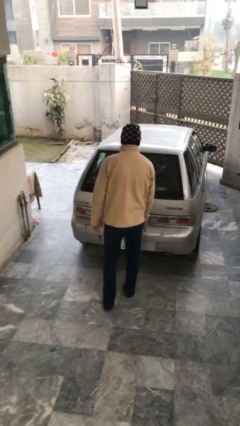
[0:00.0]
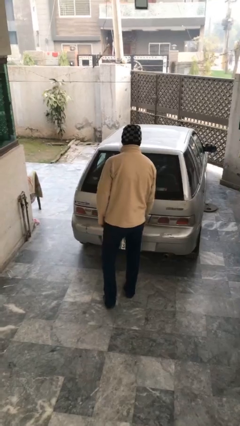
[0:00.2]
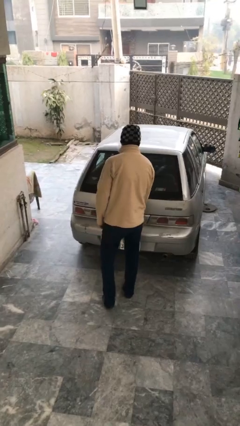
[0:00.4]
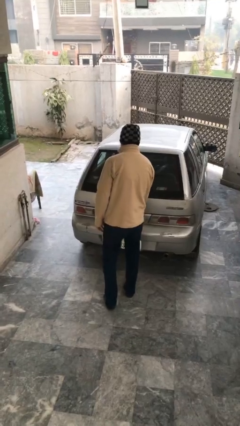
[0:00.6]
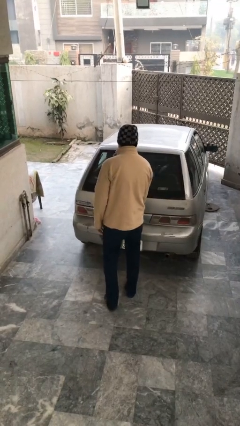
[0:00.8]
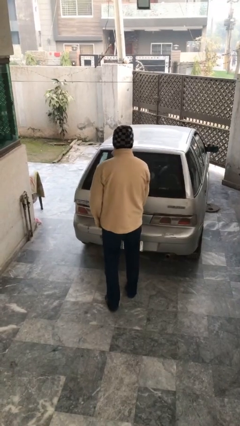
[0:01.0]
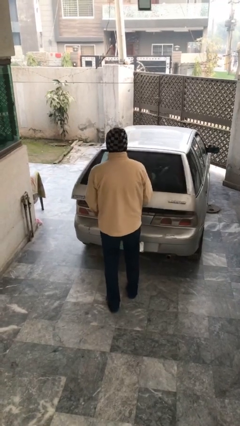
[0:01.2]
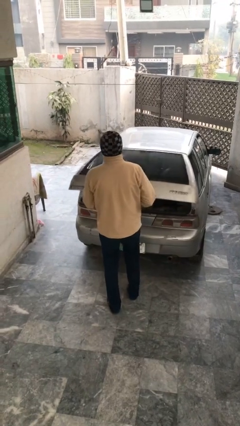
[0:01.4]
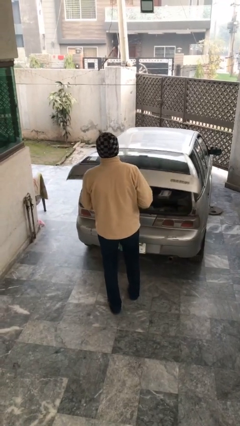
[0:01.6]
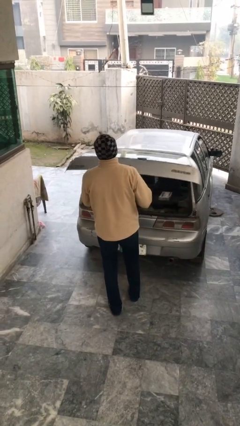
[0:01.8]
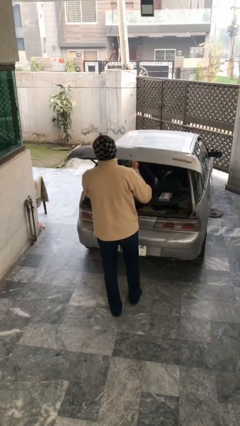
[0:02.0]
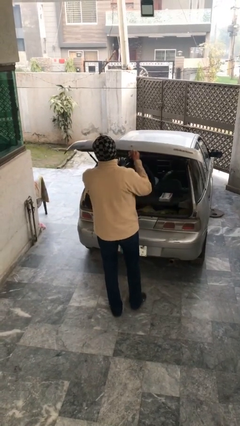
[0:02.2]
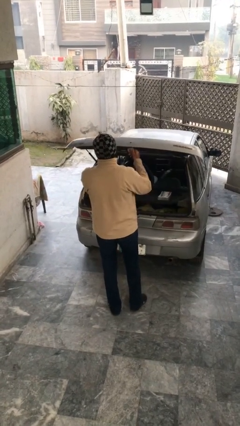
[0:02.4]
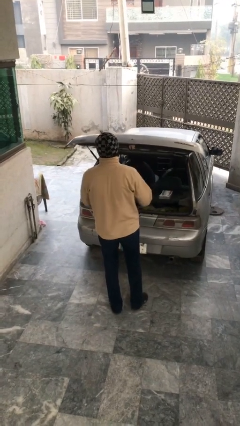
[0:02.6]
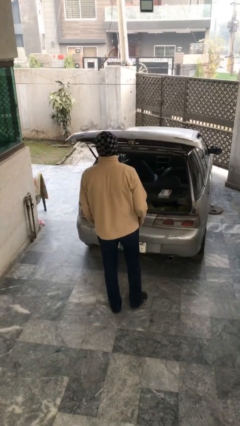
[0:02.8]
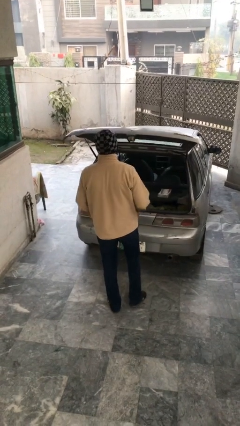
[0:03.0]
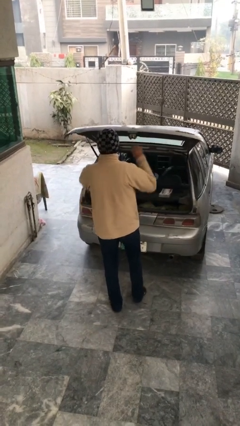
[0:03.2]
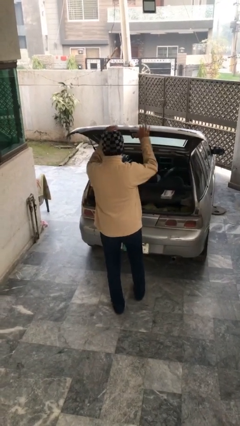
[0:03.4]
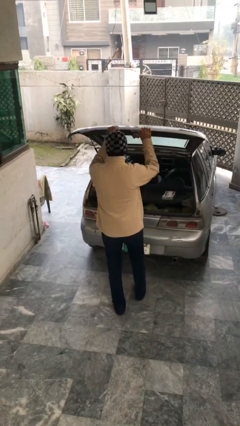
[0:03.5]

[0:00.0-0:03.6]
person opens car trunk

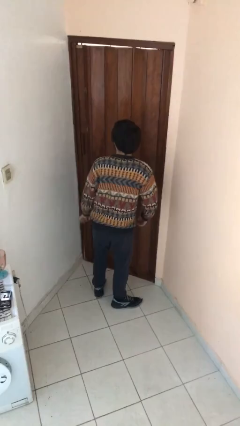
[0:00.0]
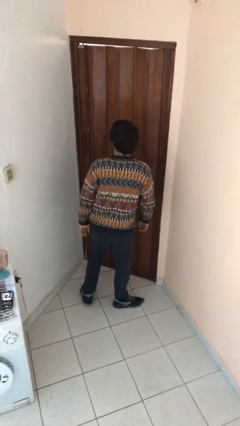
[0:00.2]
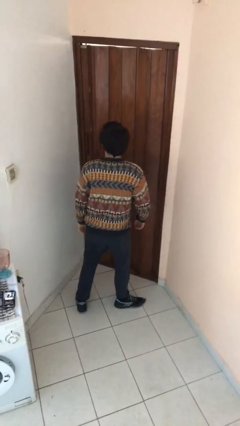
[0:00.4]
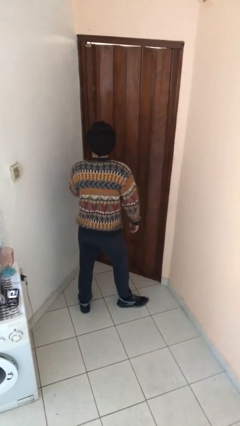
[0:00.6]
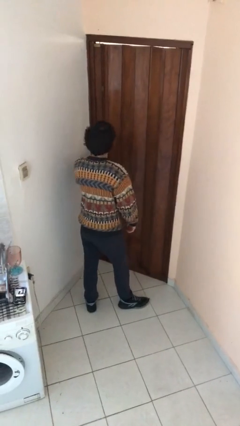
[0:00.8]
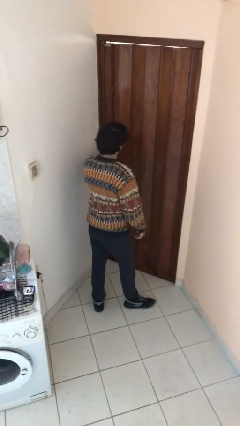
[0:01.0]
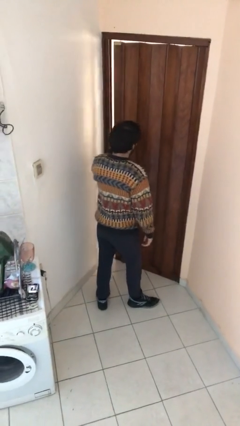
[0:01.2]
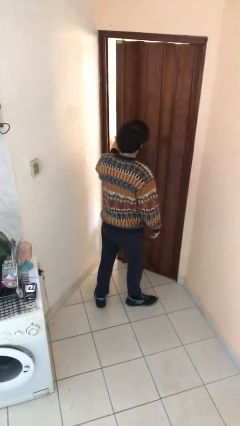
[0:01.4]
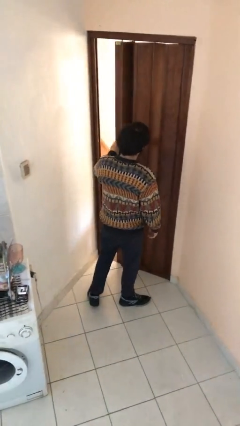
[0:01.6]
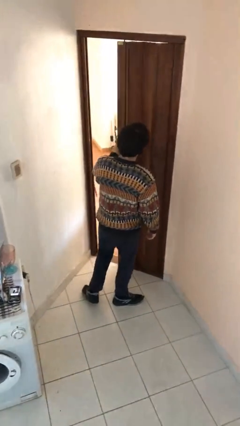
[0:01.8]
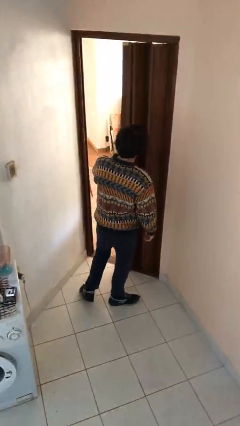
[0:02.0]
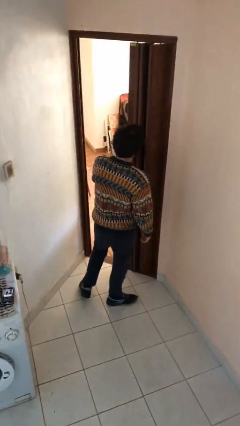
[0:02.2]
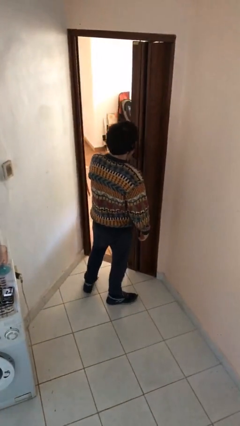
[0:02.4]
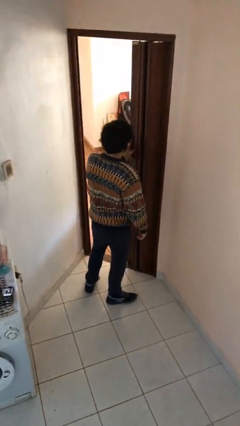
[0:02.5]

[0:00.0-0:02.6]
person opens sliding door

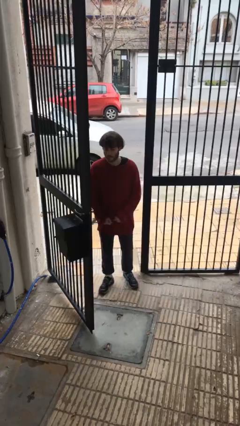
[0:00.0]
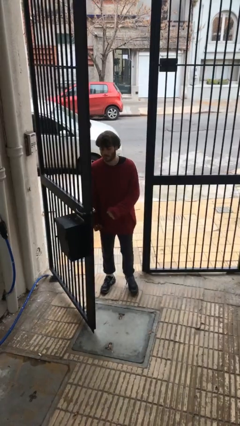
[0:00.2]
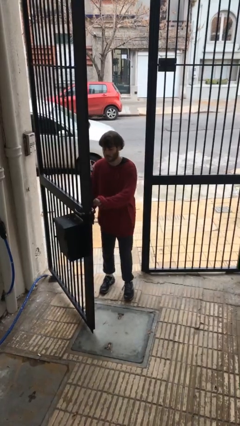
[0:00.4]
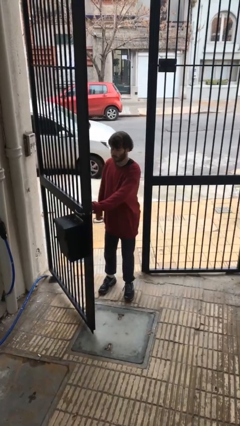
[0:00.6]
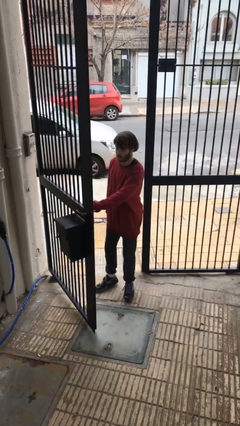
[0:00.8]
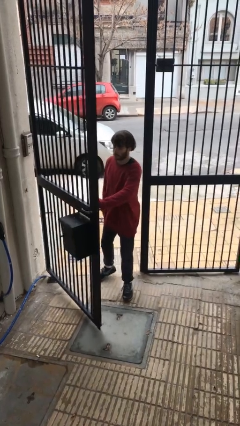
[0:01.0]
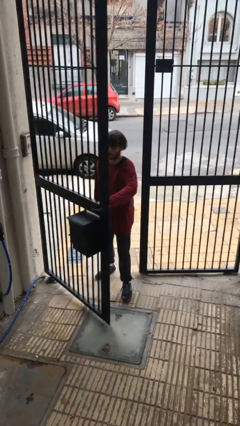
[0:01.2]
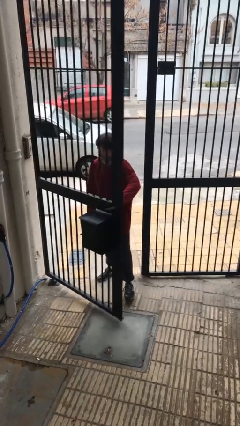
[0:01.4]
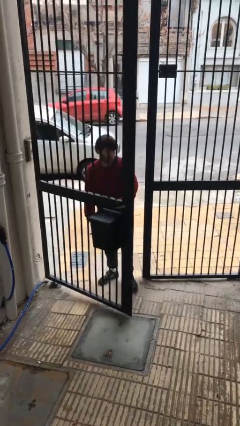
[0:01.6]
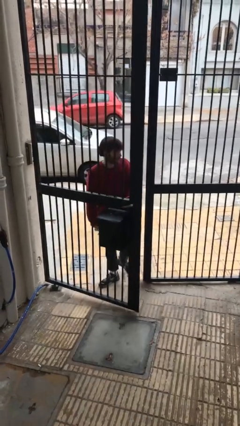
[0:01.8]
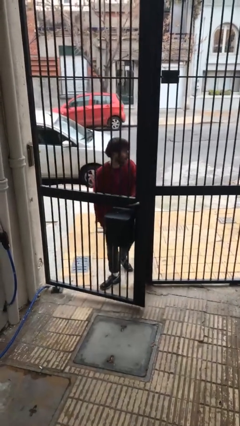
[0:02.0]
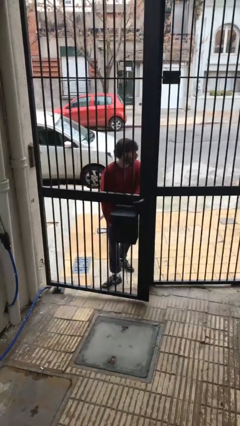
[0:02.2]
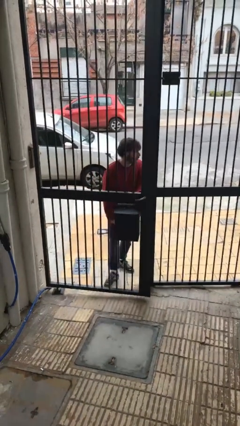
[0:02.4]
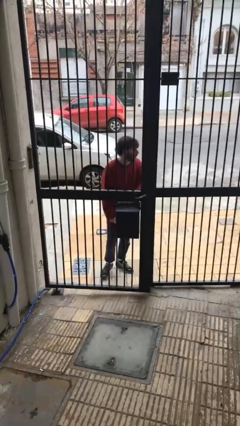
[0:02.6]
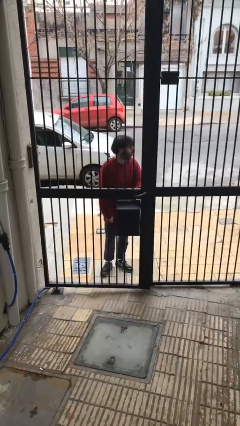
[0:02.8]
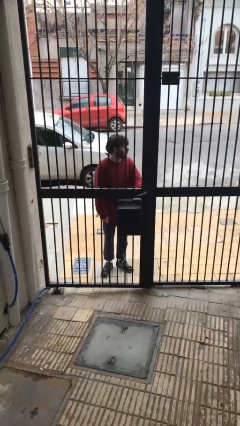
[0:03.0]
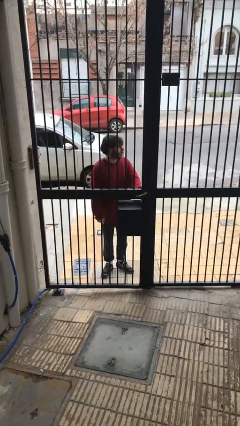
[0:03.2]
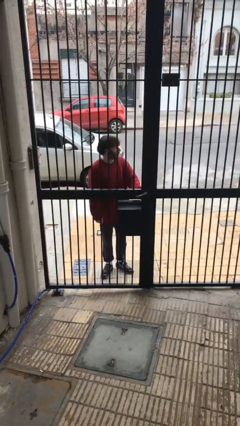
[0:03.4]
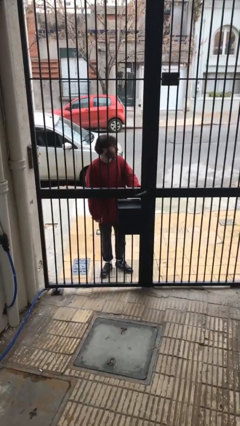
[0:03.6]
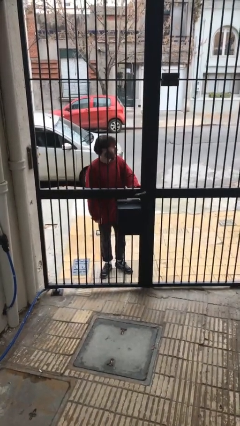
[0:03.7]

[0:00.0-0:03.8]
person closes gate

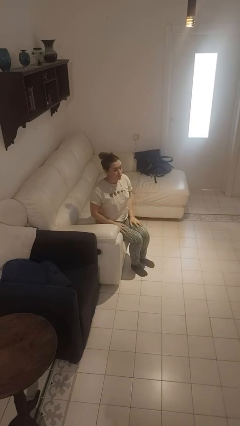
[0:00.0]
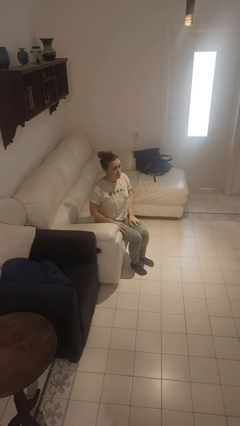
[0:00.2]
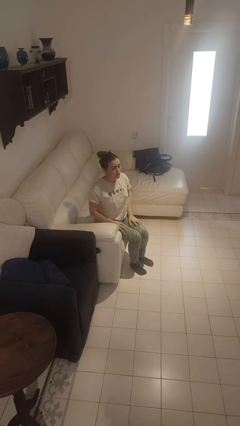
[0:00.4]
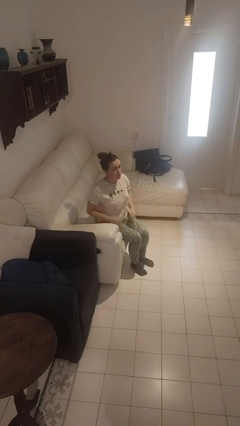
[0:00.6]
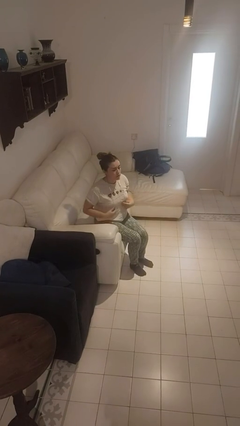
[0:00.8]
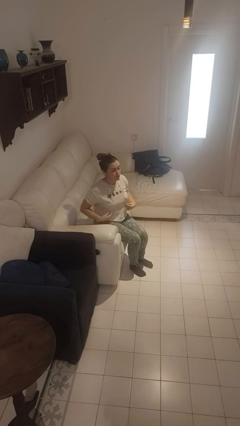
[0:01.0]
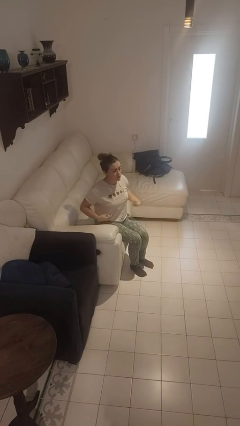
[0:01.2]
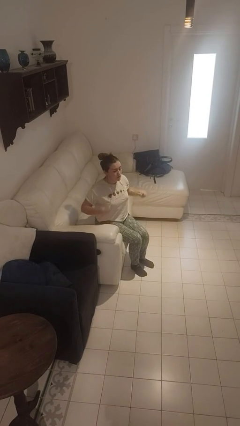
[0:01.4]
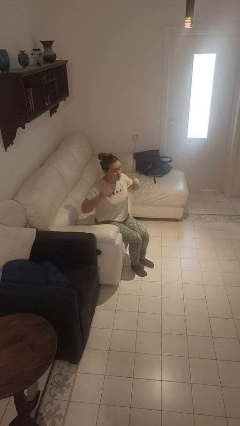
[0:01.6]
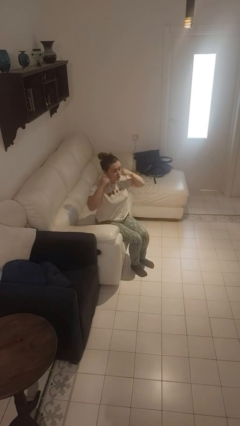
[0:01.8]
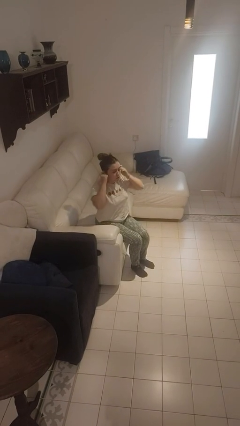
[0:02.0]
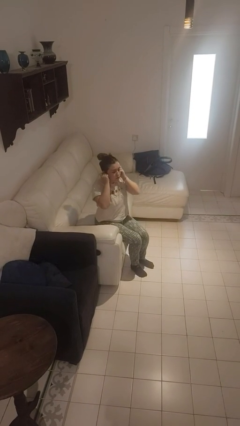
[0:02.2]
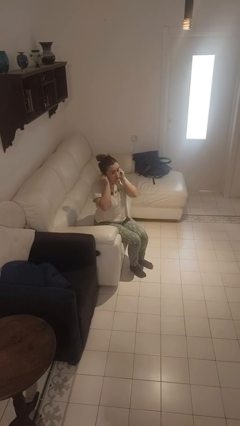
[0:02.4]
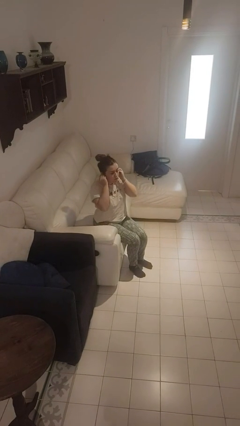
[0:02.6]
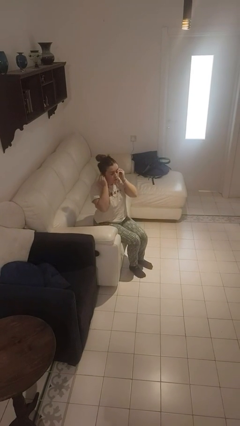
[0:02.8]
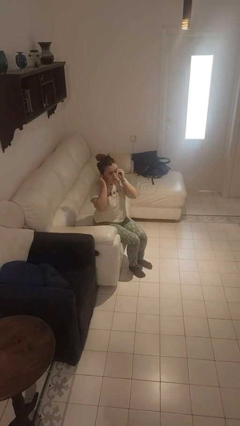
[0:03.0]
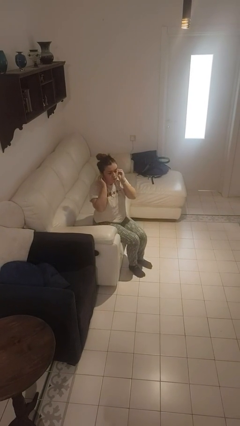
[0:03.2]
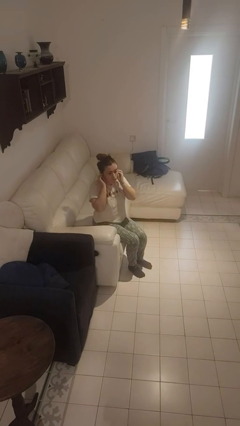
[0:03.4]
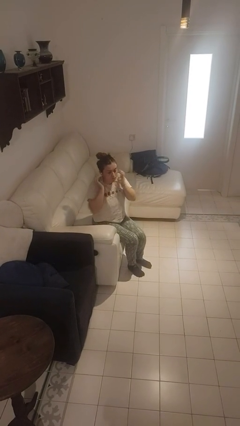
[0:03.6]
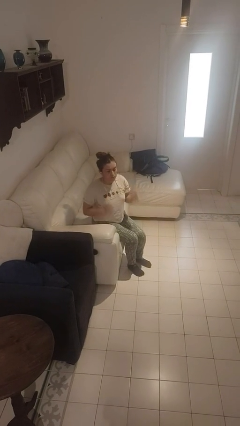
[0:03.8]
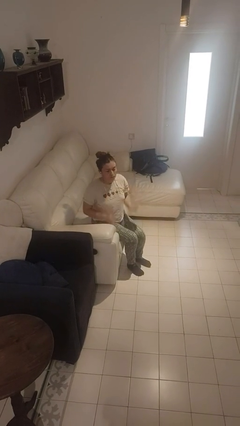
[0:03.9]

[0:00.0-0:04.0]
person puts on headphones

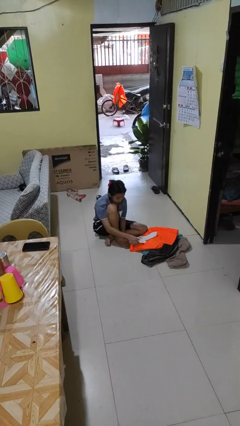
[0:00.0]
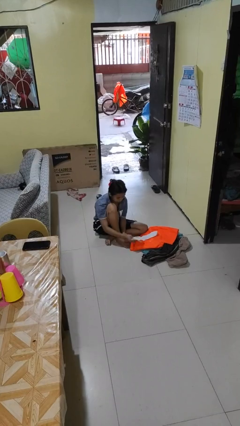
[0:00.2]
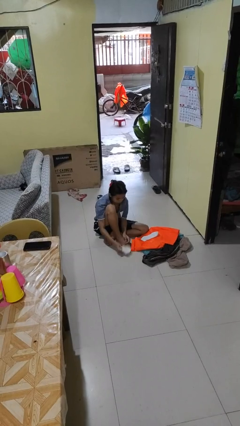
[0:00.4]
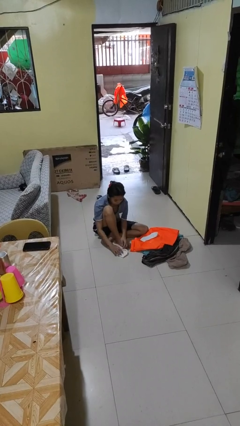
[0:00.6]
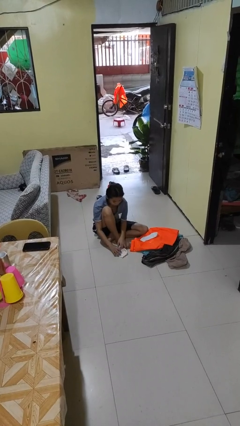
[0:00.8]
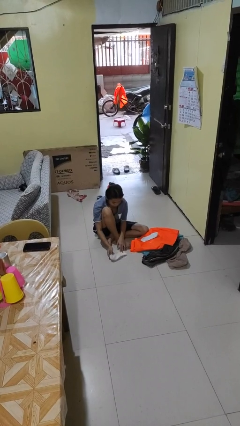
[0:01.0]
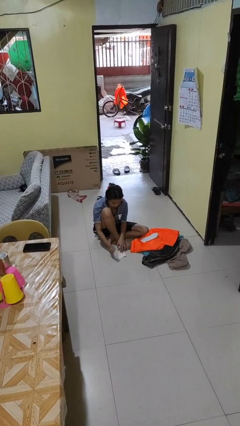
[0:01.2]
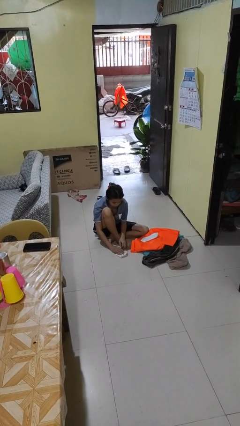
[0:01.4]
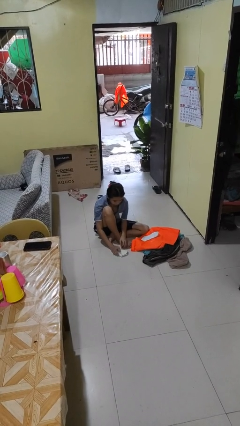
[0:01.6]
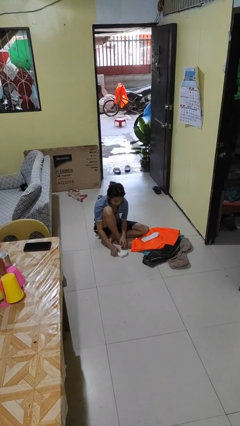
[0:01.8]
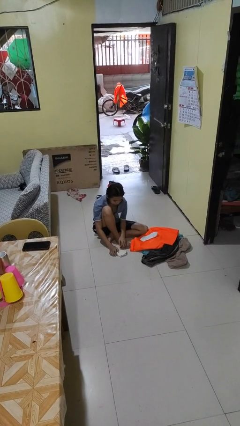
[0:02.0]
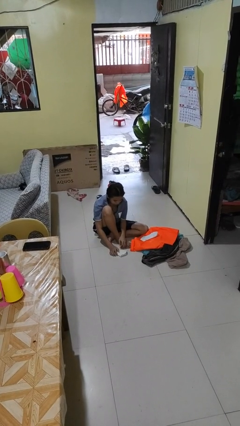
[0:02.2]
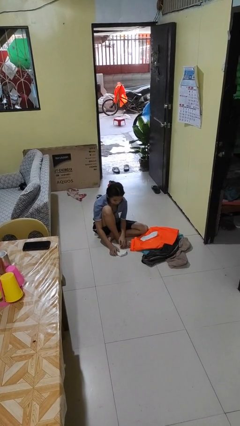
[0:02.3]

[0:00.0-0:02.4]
person folds socks

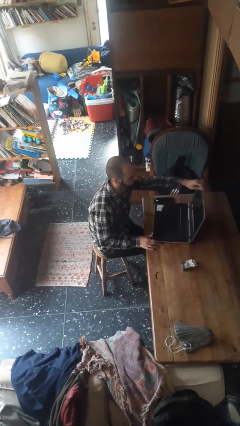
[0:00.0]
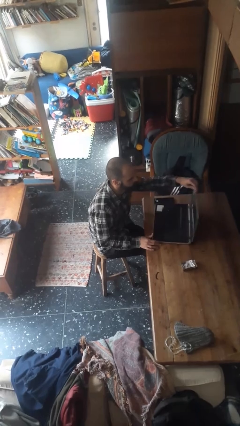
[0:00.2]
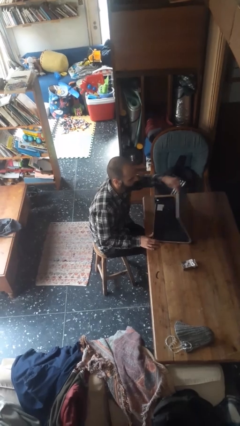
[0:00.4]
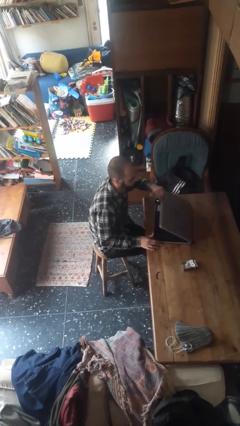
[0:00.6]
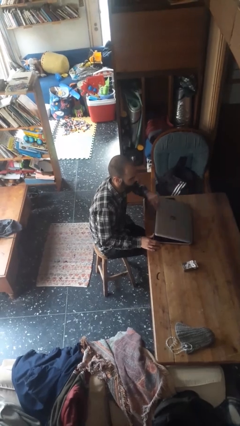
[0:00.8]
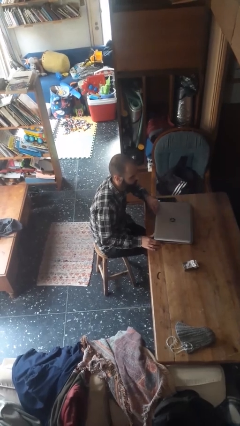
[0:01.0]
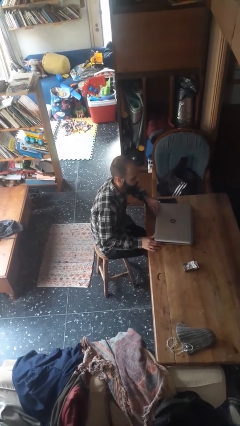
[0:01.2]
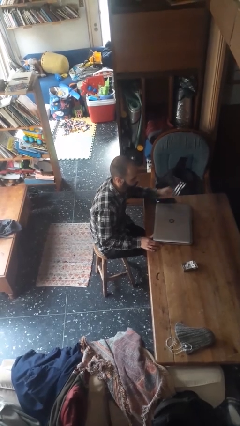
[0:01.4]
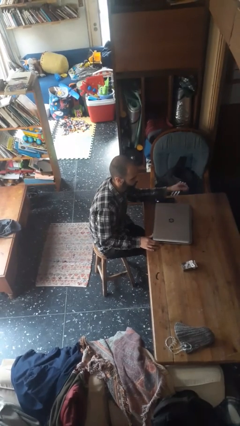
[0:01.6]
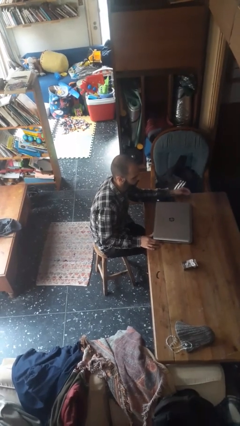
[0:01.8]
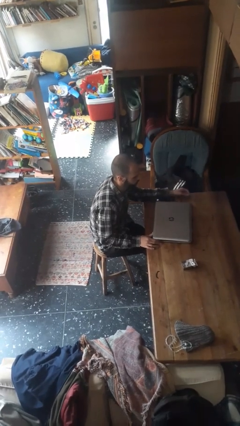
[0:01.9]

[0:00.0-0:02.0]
person closes laptop
